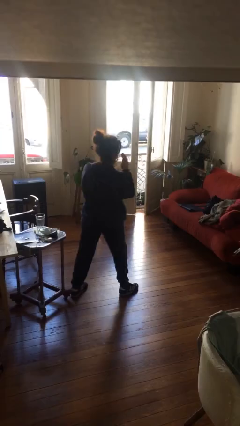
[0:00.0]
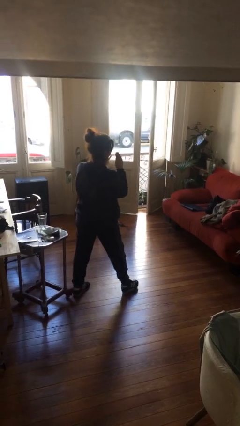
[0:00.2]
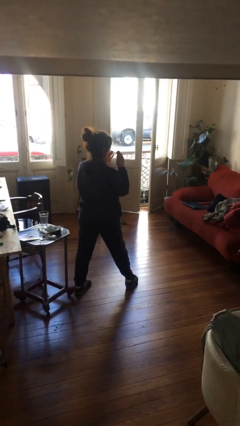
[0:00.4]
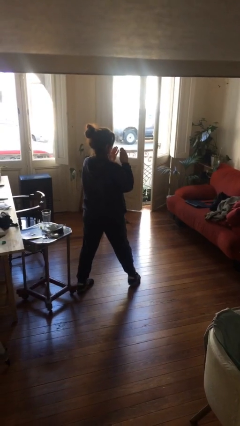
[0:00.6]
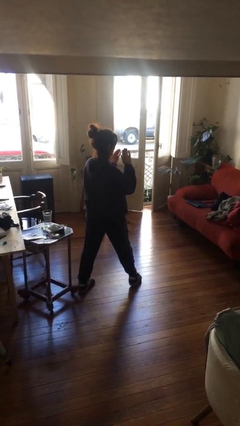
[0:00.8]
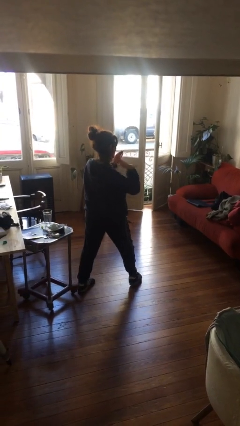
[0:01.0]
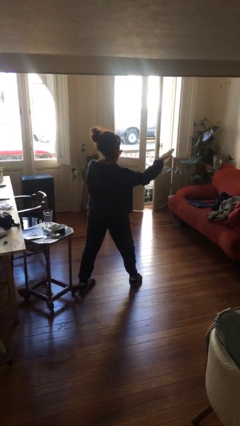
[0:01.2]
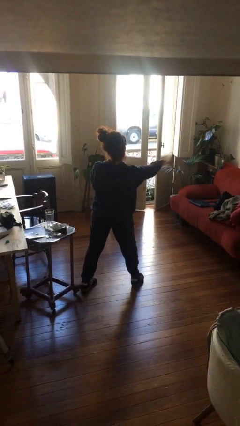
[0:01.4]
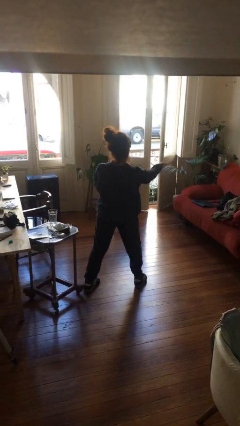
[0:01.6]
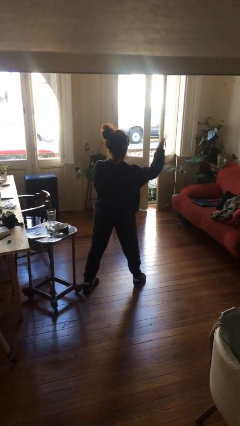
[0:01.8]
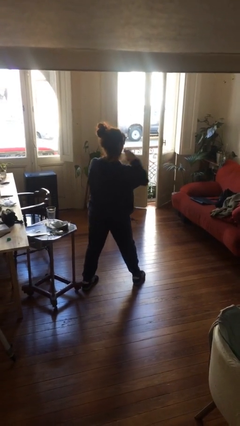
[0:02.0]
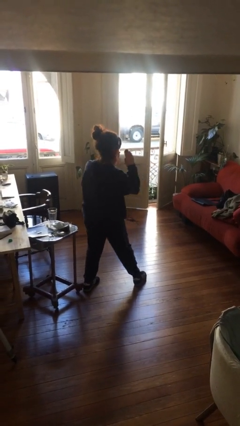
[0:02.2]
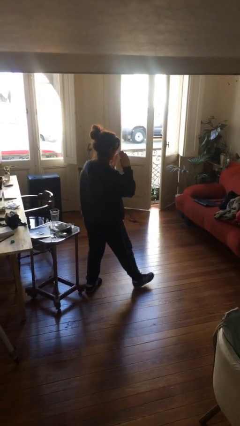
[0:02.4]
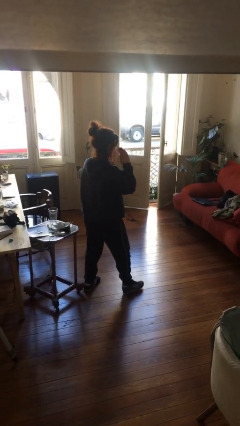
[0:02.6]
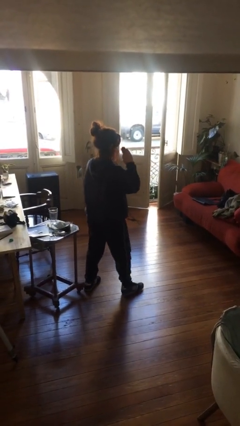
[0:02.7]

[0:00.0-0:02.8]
person karate chop

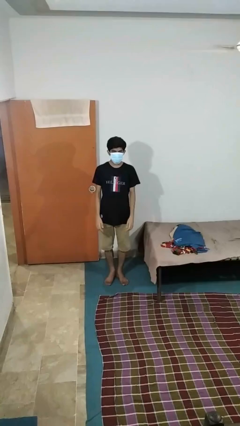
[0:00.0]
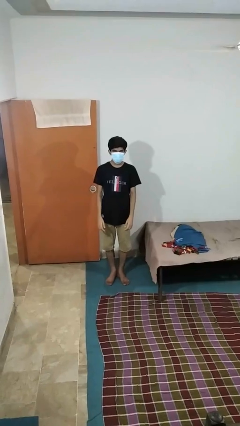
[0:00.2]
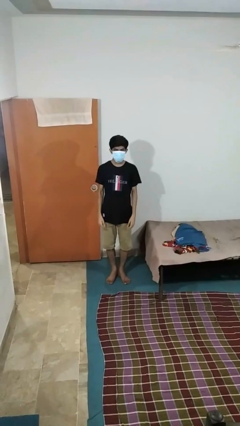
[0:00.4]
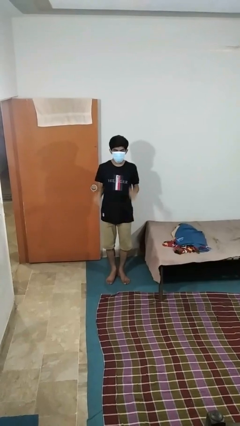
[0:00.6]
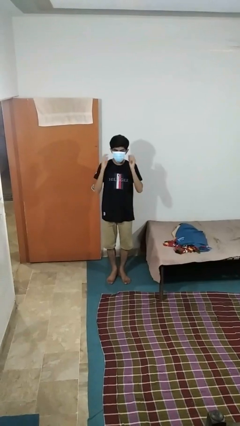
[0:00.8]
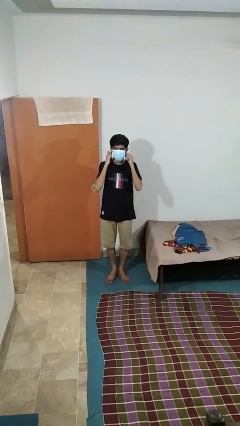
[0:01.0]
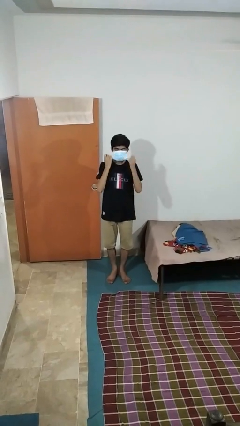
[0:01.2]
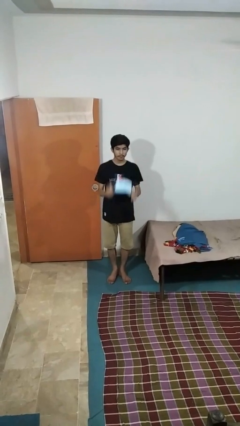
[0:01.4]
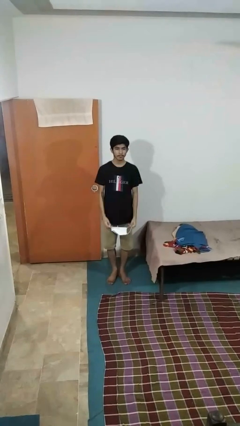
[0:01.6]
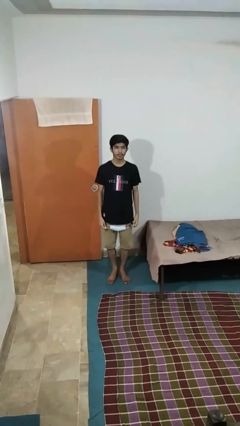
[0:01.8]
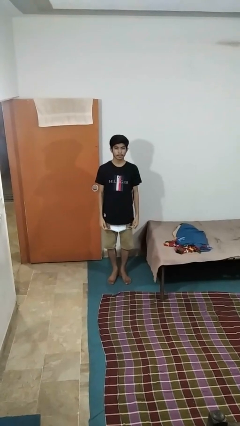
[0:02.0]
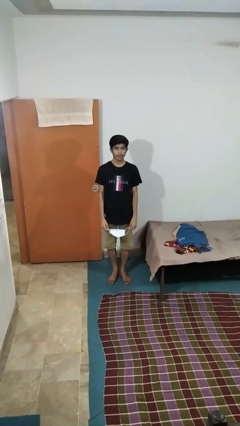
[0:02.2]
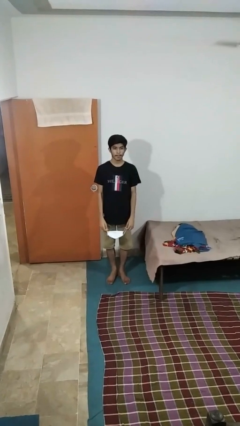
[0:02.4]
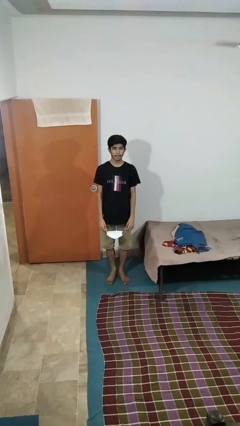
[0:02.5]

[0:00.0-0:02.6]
person takes off facemask

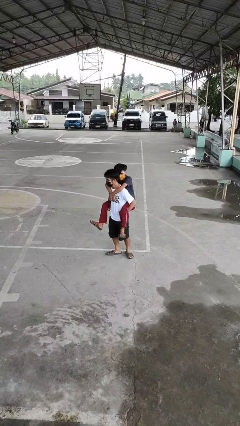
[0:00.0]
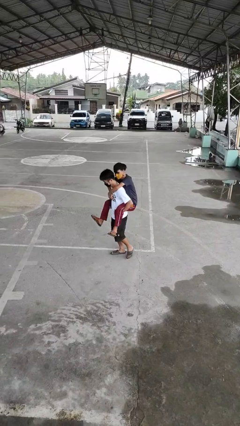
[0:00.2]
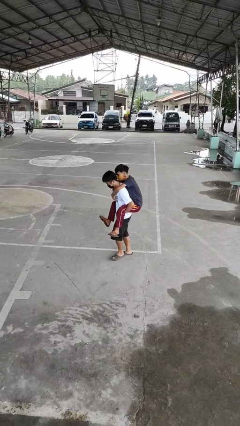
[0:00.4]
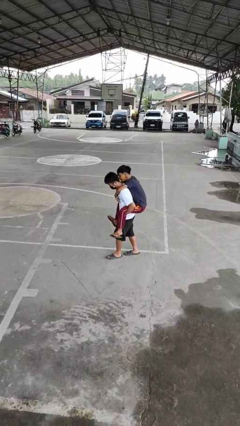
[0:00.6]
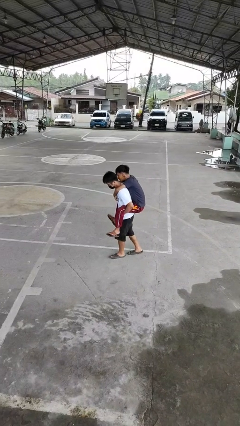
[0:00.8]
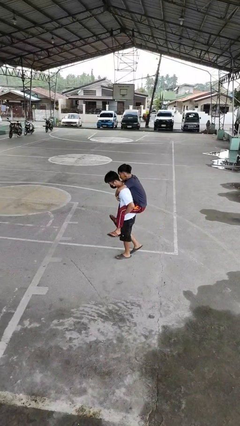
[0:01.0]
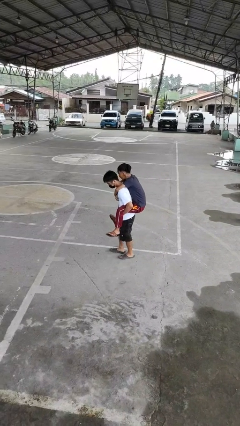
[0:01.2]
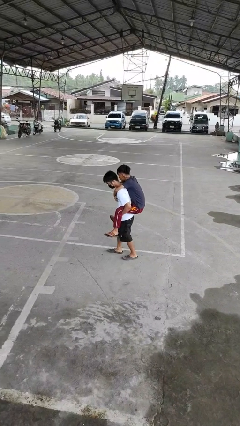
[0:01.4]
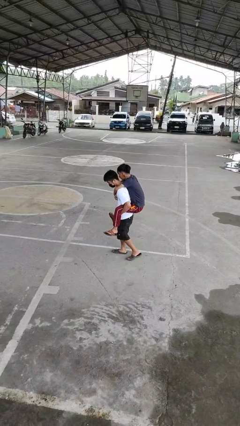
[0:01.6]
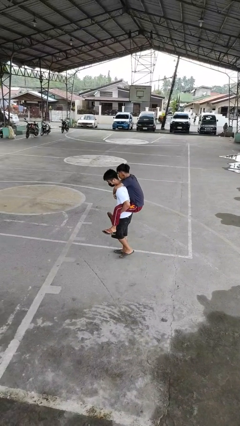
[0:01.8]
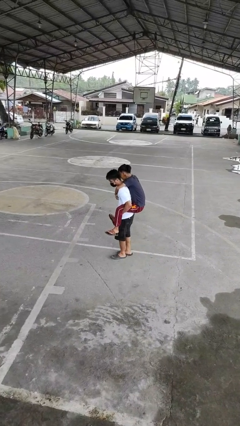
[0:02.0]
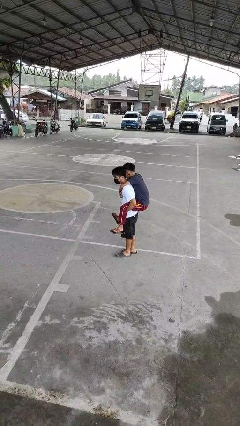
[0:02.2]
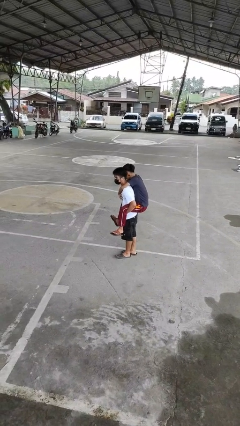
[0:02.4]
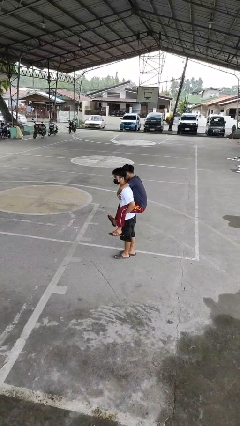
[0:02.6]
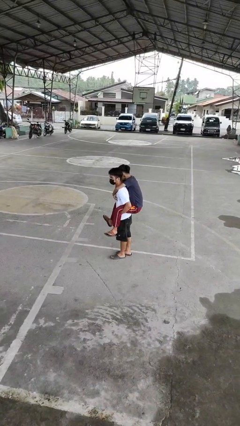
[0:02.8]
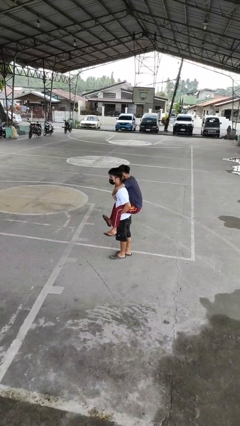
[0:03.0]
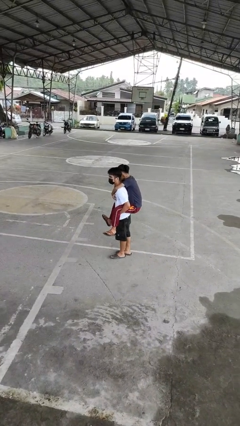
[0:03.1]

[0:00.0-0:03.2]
person carries person on back

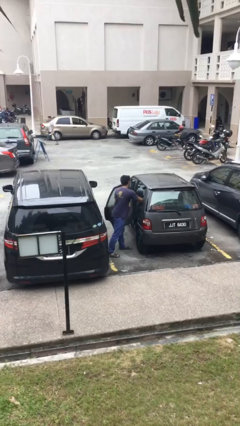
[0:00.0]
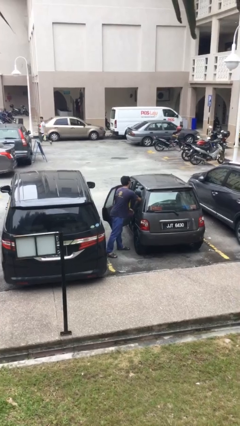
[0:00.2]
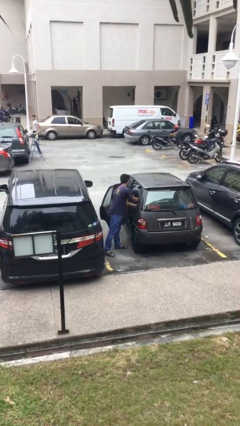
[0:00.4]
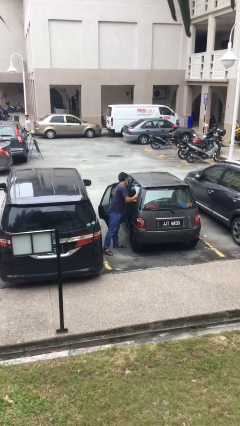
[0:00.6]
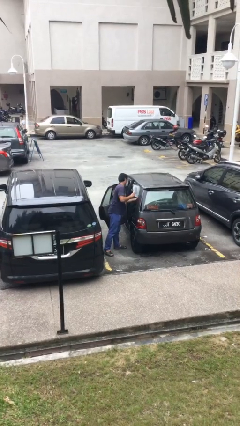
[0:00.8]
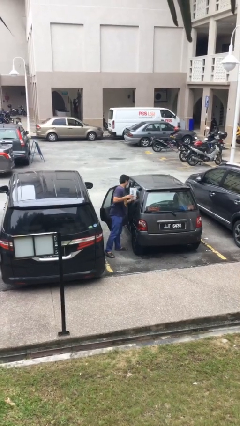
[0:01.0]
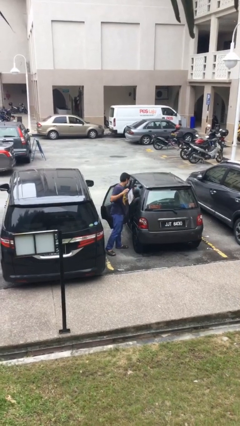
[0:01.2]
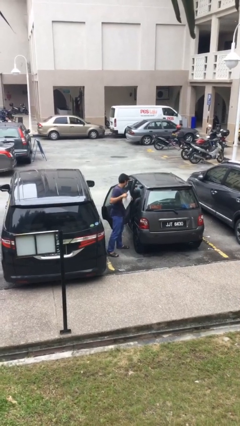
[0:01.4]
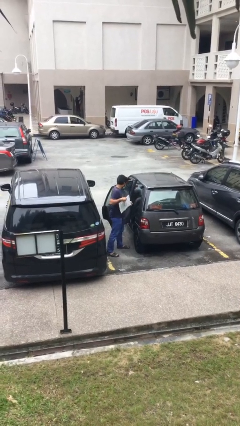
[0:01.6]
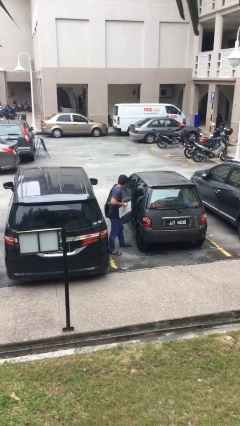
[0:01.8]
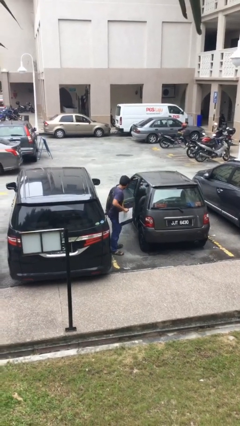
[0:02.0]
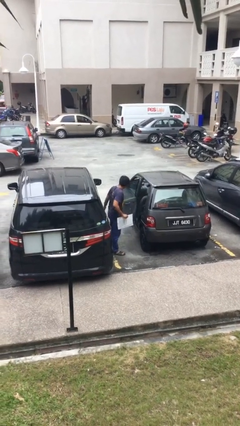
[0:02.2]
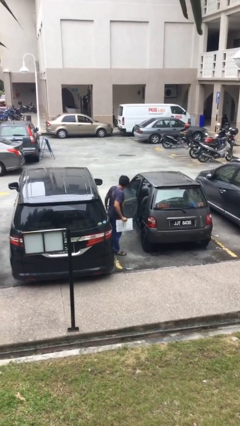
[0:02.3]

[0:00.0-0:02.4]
person unloads car

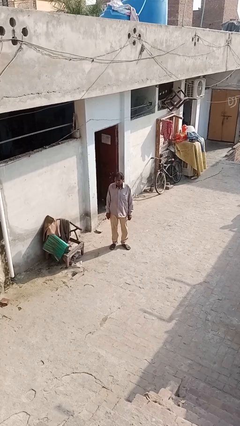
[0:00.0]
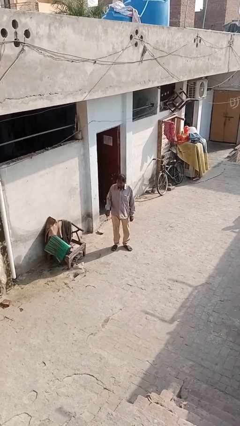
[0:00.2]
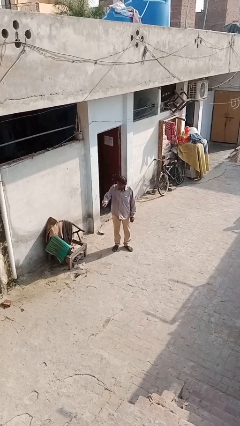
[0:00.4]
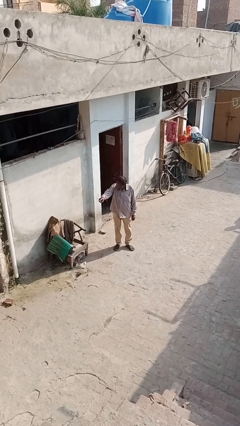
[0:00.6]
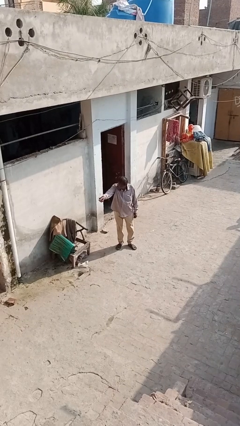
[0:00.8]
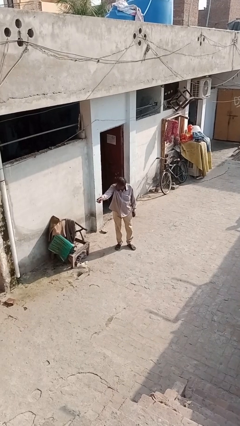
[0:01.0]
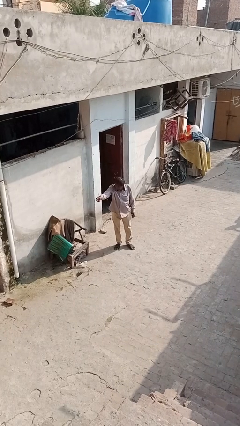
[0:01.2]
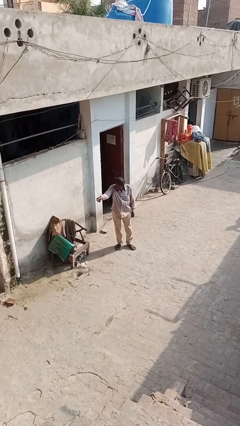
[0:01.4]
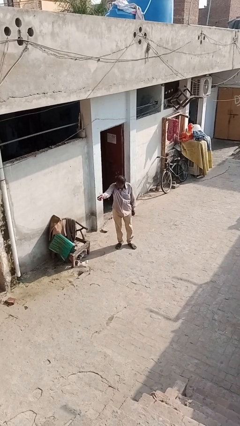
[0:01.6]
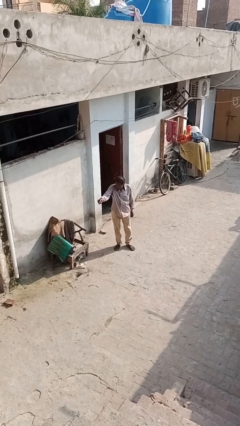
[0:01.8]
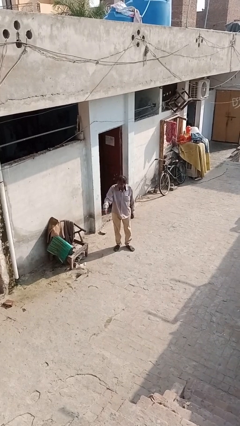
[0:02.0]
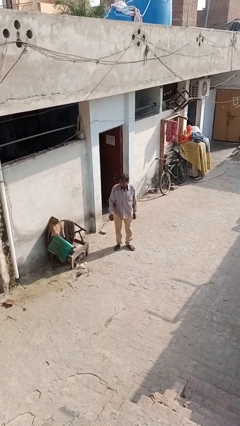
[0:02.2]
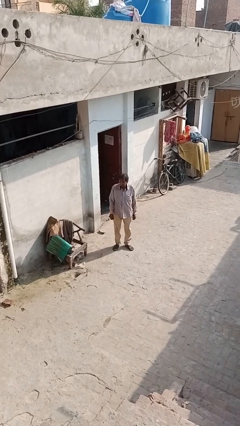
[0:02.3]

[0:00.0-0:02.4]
person points at person

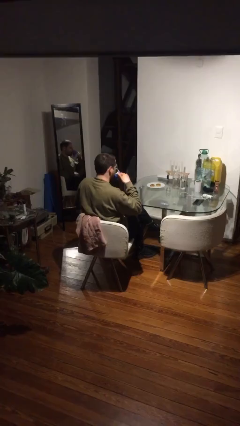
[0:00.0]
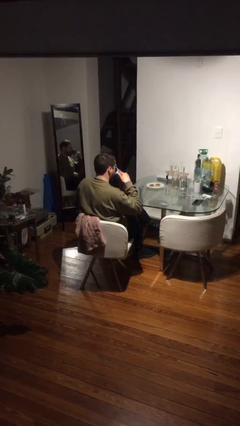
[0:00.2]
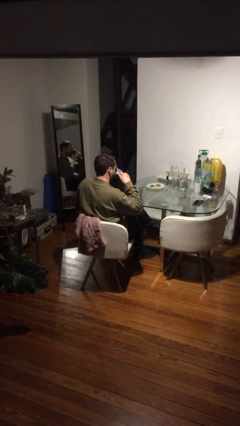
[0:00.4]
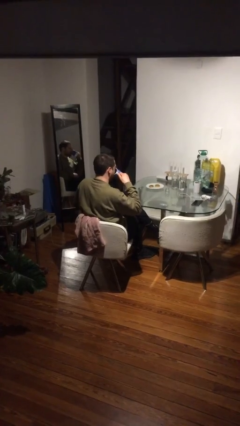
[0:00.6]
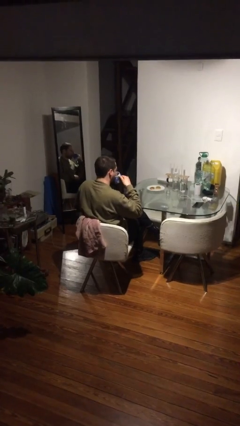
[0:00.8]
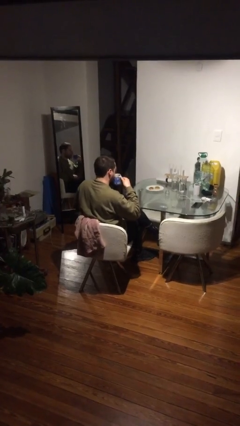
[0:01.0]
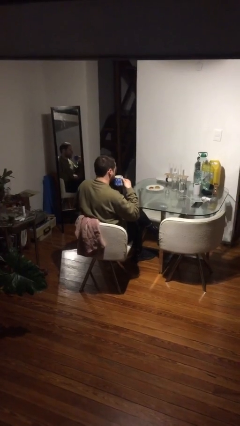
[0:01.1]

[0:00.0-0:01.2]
person drinks from mug

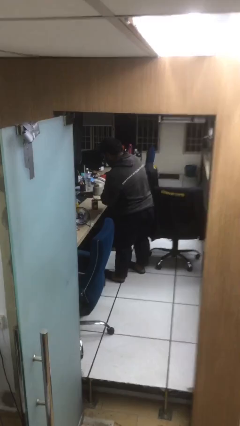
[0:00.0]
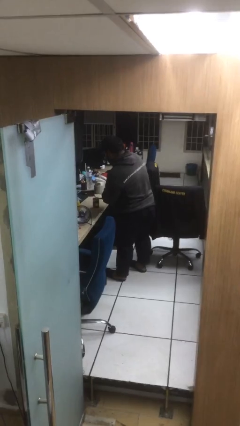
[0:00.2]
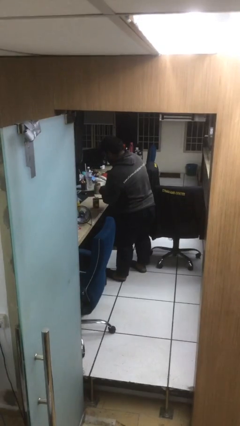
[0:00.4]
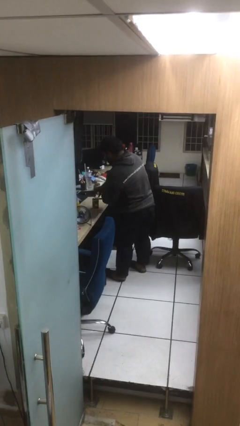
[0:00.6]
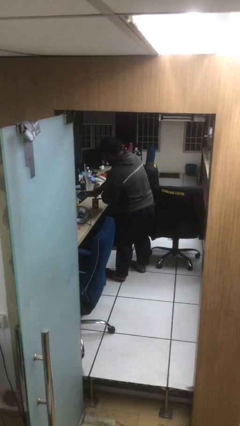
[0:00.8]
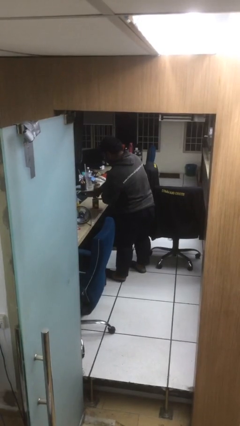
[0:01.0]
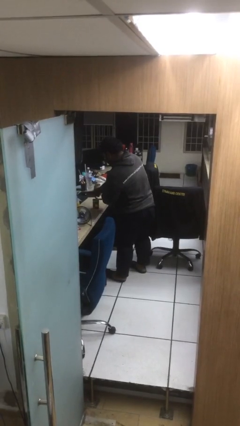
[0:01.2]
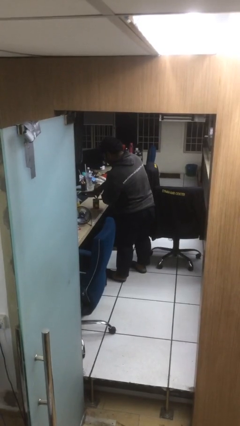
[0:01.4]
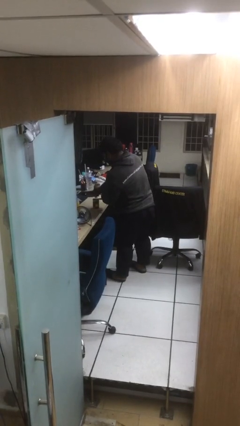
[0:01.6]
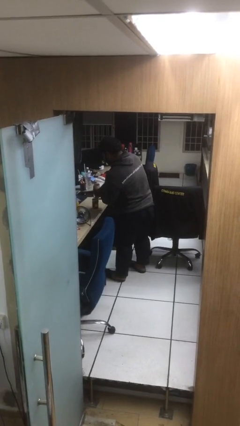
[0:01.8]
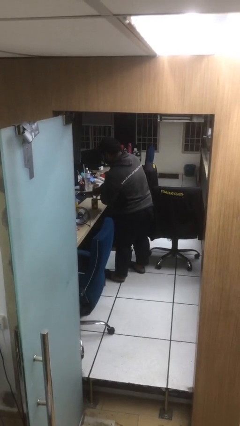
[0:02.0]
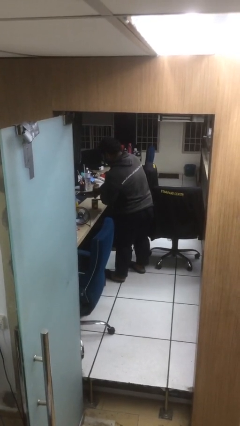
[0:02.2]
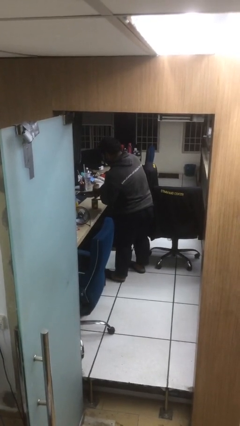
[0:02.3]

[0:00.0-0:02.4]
person opens can with can opener

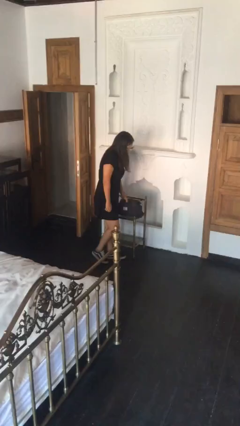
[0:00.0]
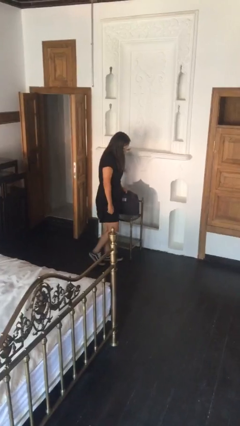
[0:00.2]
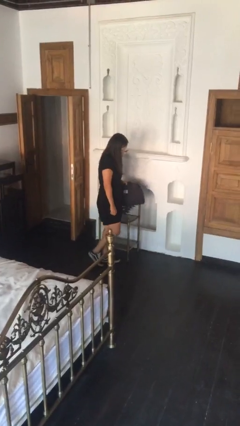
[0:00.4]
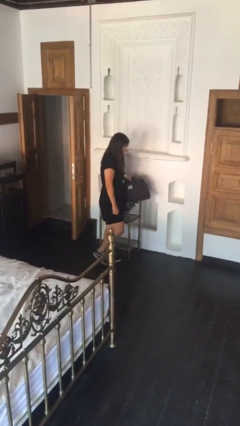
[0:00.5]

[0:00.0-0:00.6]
person picks up object from table
